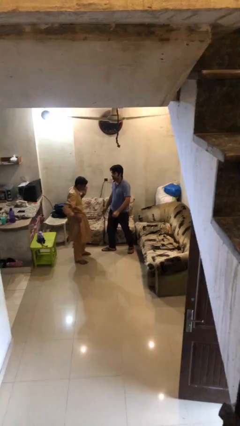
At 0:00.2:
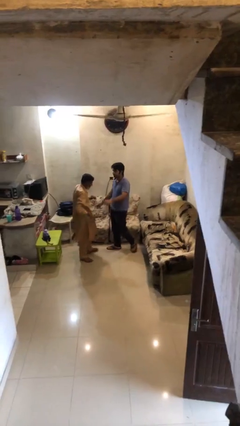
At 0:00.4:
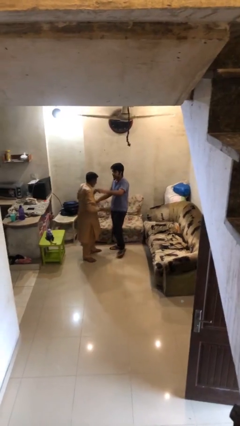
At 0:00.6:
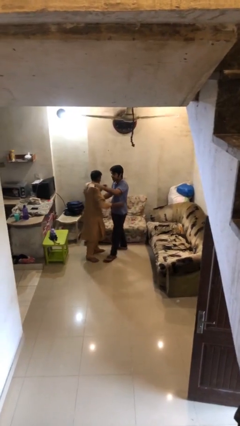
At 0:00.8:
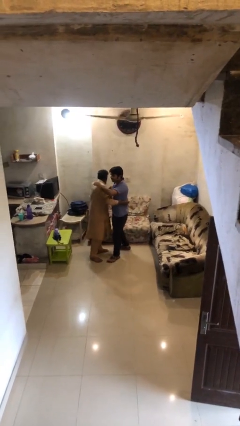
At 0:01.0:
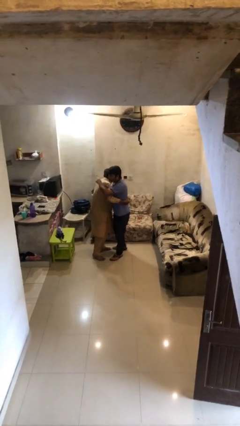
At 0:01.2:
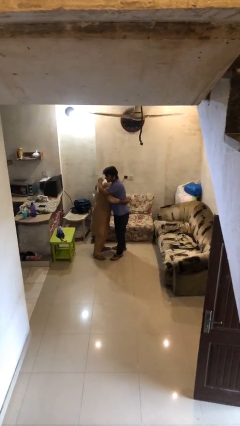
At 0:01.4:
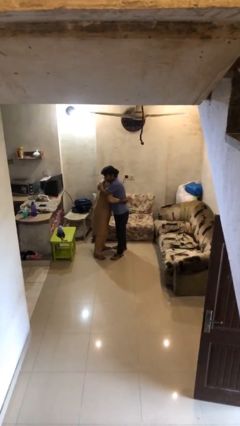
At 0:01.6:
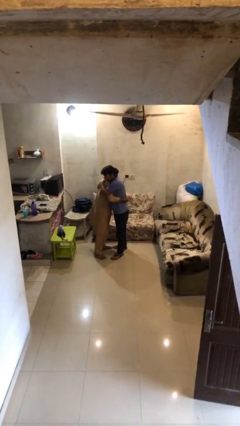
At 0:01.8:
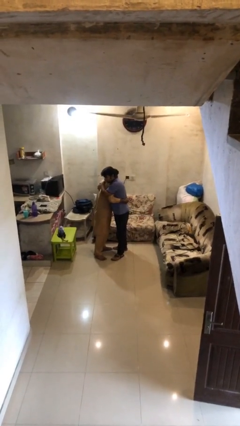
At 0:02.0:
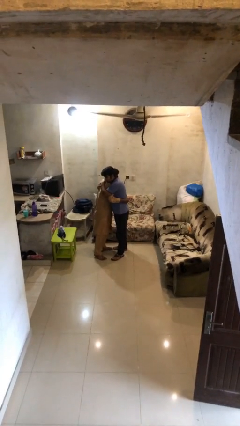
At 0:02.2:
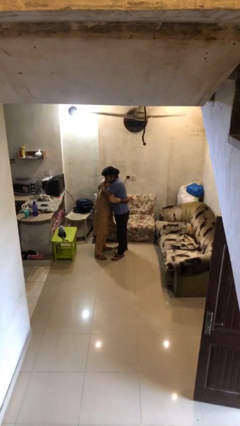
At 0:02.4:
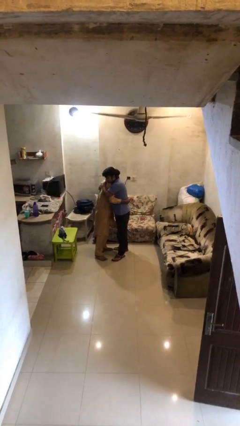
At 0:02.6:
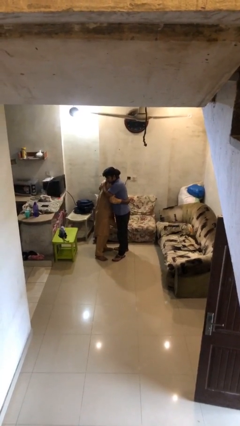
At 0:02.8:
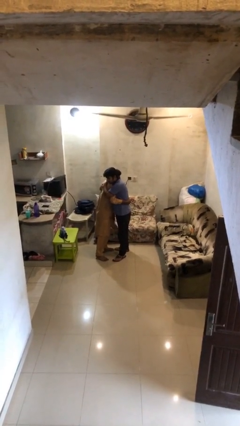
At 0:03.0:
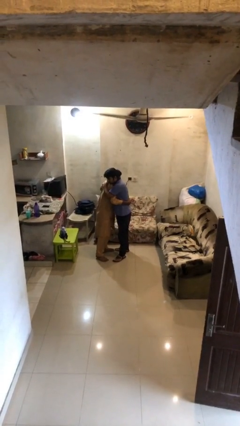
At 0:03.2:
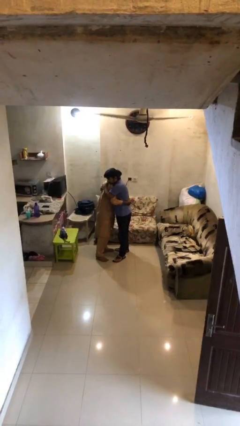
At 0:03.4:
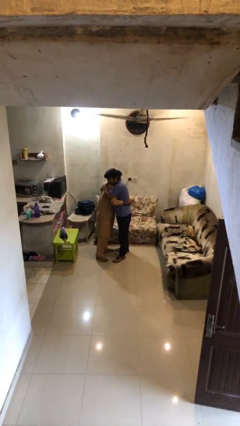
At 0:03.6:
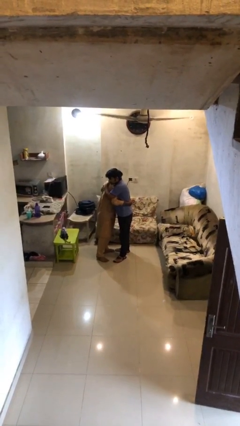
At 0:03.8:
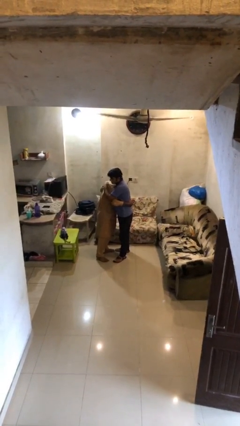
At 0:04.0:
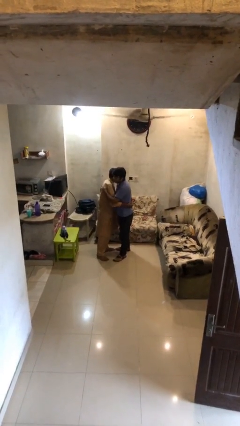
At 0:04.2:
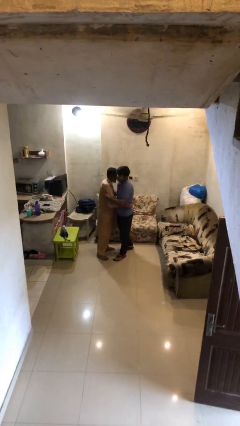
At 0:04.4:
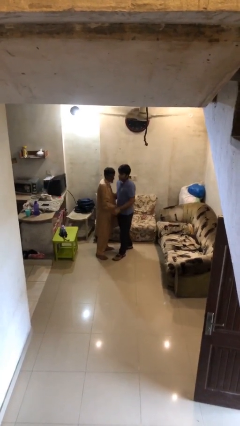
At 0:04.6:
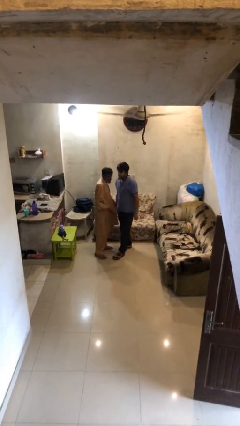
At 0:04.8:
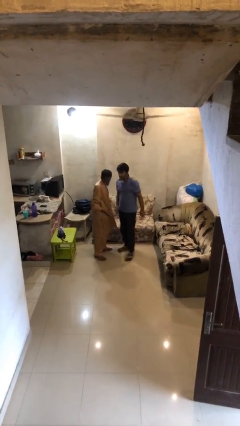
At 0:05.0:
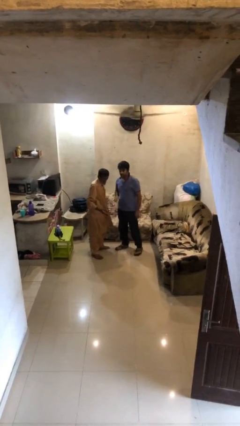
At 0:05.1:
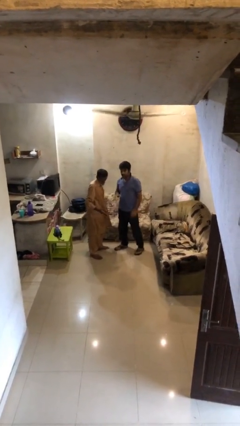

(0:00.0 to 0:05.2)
person embraces person

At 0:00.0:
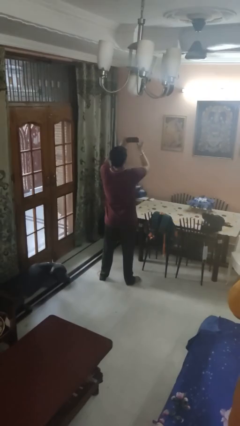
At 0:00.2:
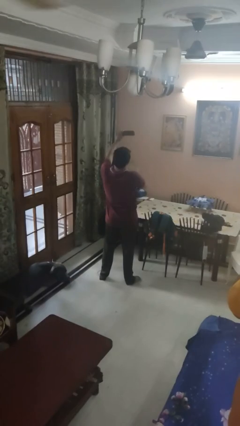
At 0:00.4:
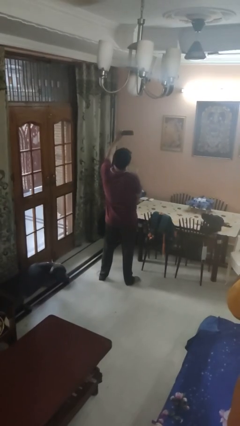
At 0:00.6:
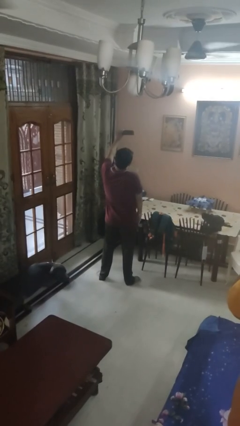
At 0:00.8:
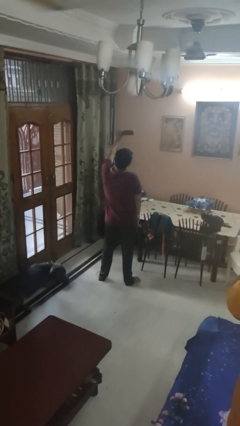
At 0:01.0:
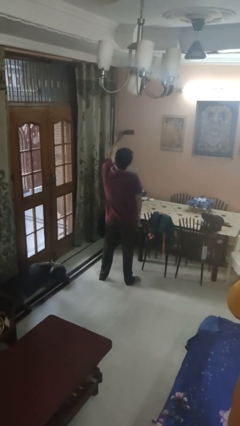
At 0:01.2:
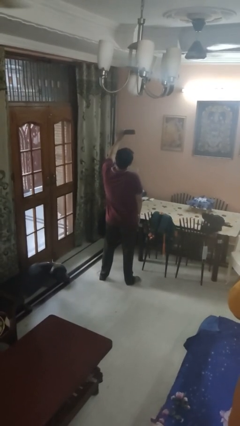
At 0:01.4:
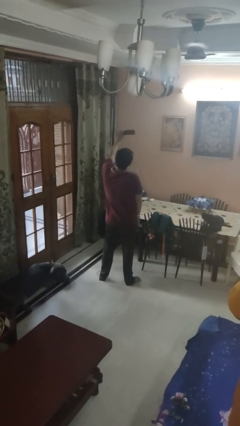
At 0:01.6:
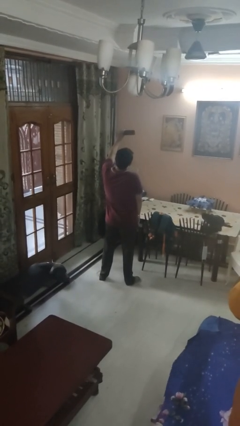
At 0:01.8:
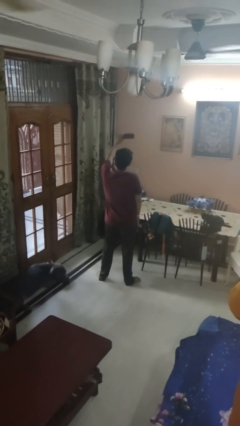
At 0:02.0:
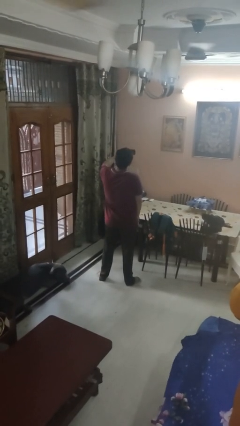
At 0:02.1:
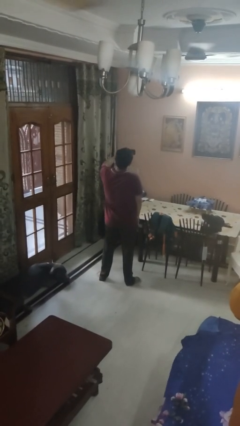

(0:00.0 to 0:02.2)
person takes selfie

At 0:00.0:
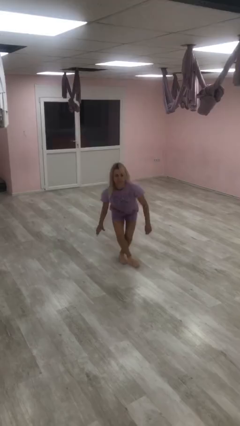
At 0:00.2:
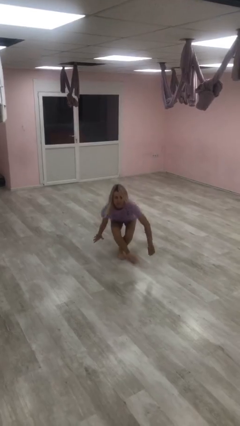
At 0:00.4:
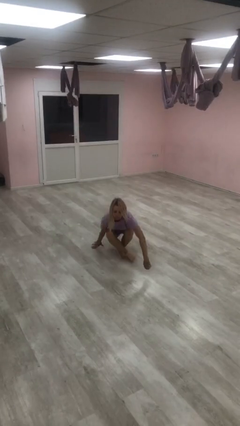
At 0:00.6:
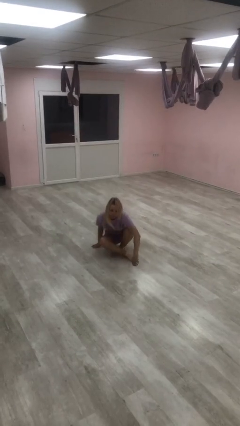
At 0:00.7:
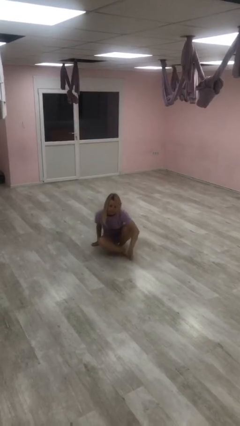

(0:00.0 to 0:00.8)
person sits crisscross

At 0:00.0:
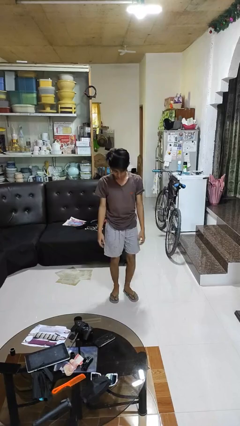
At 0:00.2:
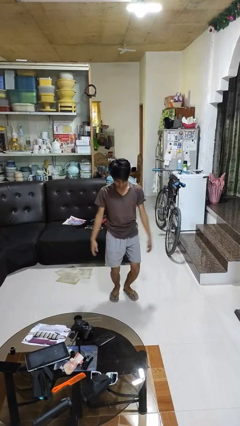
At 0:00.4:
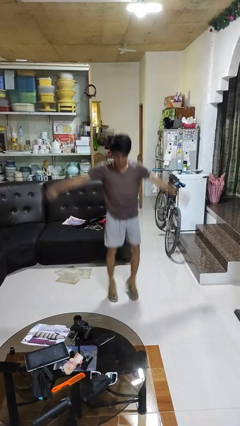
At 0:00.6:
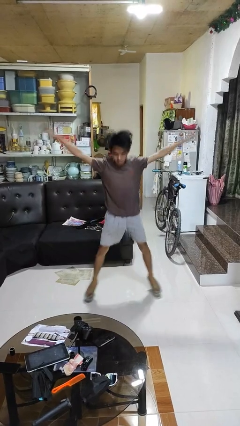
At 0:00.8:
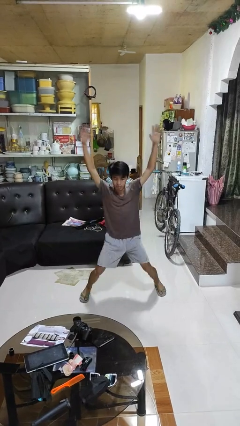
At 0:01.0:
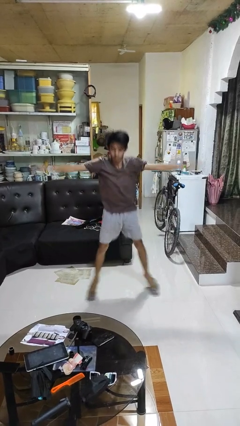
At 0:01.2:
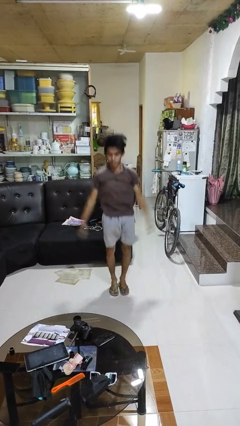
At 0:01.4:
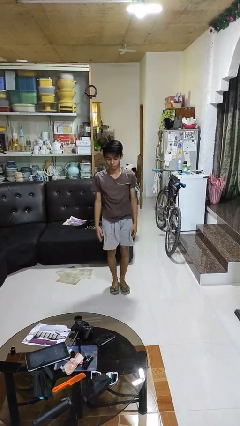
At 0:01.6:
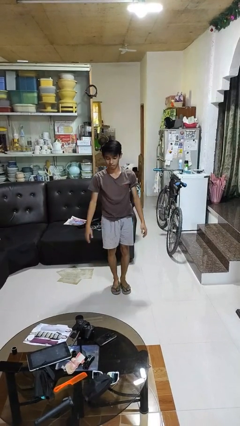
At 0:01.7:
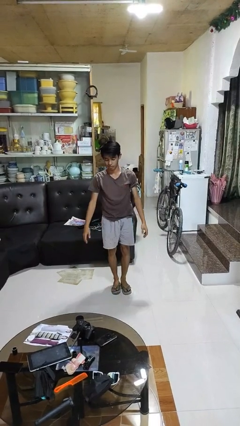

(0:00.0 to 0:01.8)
person exercises with jumping jacks

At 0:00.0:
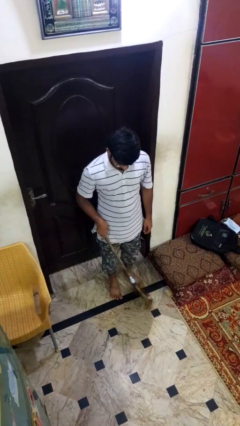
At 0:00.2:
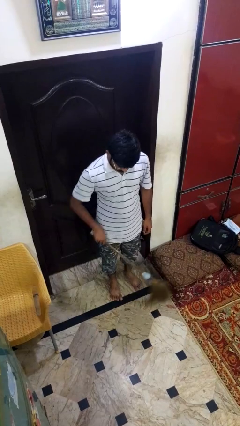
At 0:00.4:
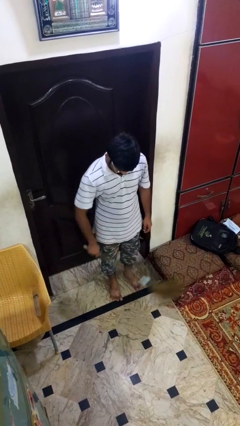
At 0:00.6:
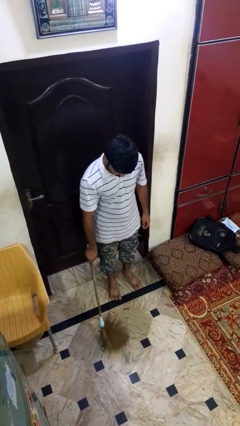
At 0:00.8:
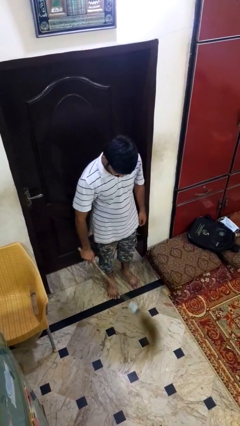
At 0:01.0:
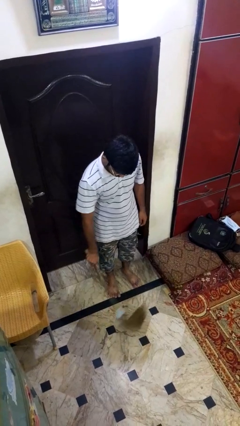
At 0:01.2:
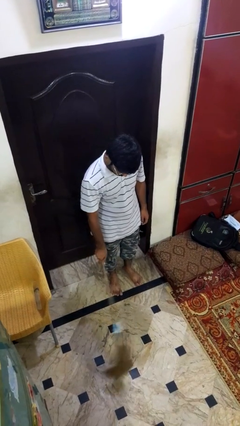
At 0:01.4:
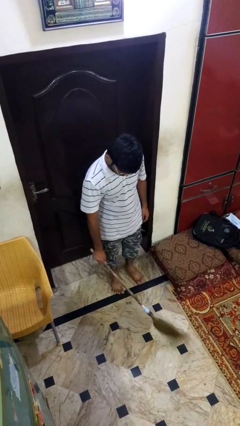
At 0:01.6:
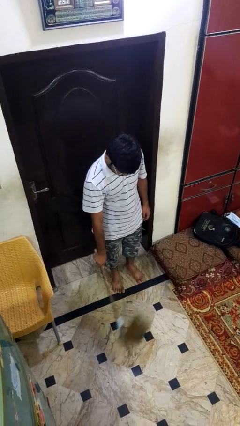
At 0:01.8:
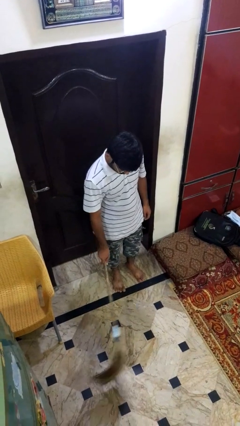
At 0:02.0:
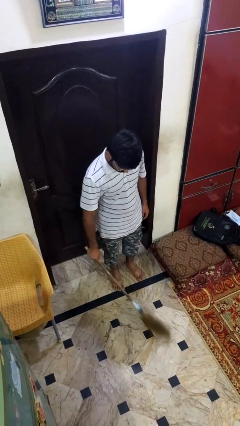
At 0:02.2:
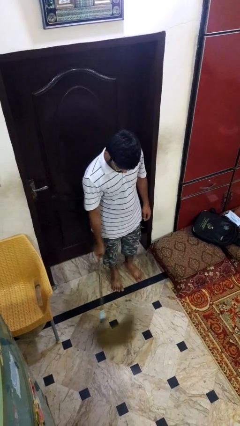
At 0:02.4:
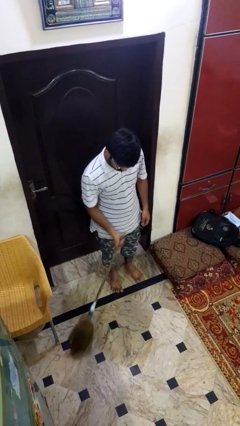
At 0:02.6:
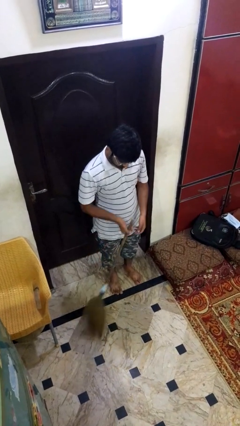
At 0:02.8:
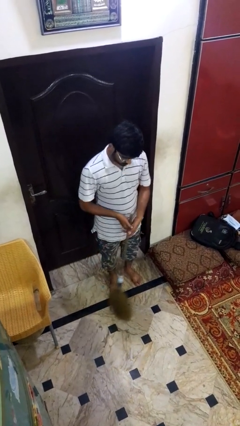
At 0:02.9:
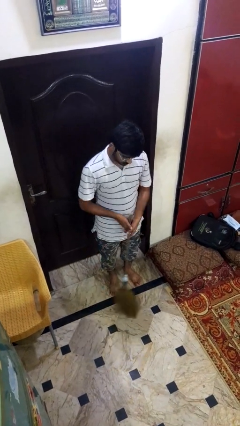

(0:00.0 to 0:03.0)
person sweeps floor

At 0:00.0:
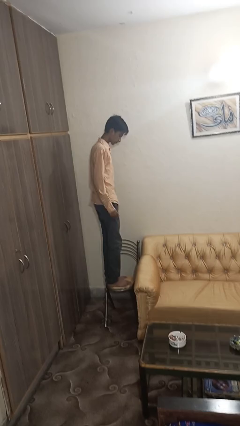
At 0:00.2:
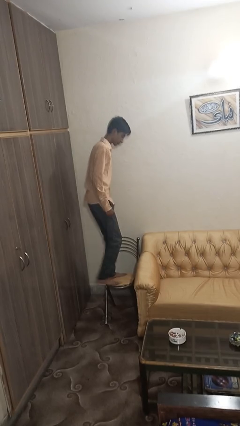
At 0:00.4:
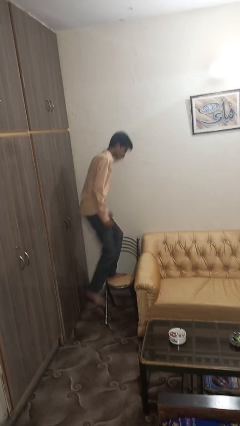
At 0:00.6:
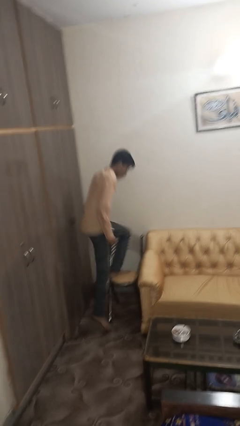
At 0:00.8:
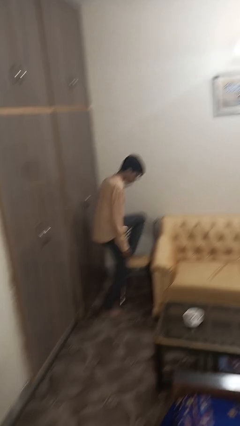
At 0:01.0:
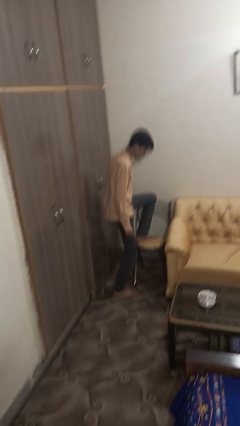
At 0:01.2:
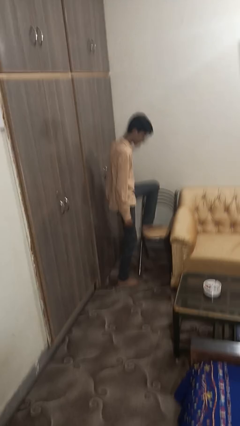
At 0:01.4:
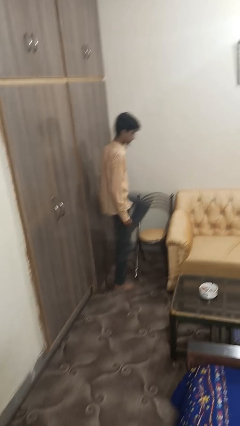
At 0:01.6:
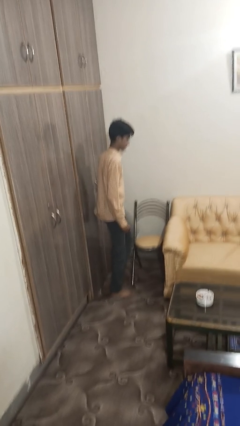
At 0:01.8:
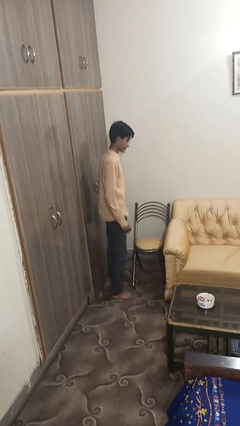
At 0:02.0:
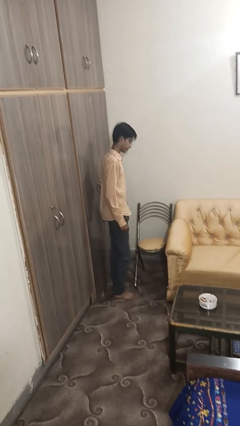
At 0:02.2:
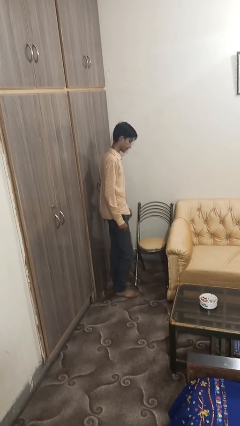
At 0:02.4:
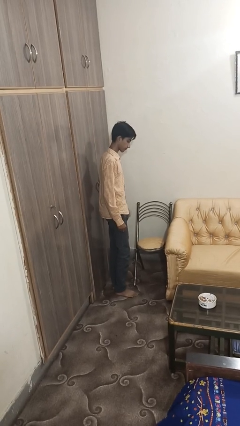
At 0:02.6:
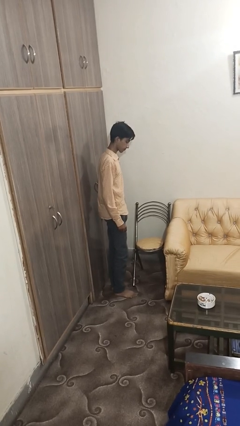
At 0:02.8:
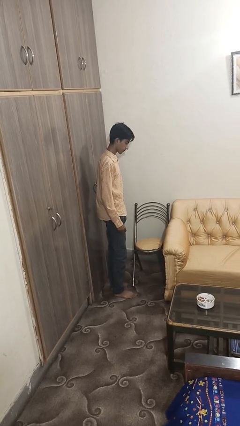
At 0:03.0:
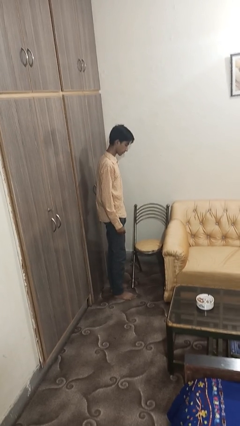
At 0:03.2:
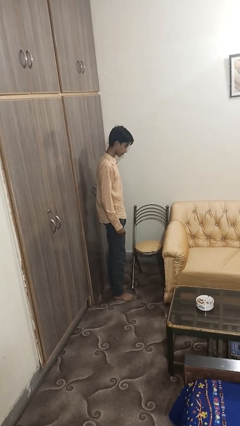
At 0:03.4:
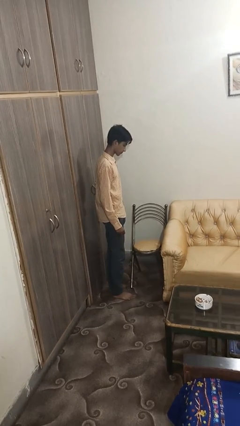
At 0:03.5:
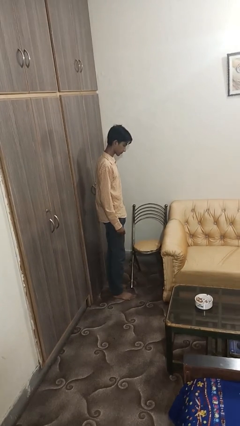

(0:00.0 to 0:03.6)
person climbs off chair

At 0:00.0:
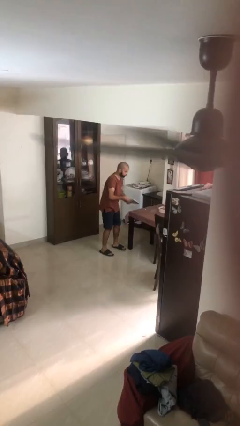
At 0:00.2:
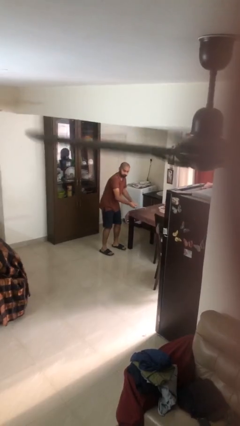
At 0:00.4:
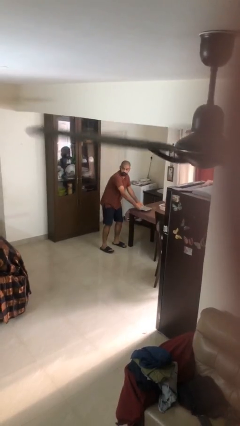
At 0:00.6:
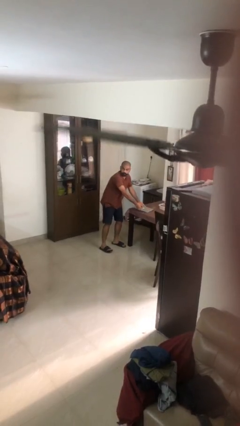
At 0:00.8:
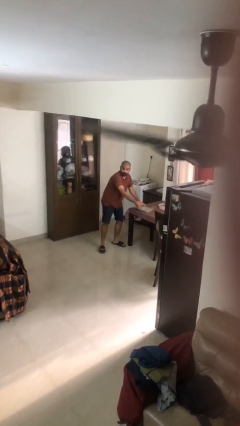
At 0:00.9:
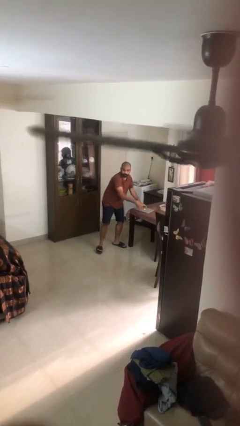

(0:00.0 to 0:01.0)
person puts down object on table
